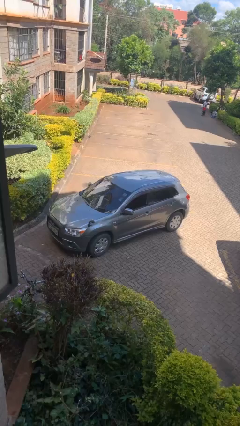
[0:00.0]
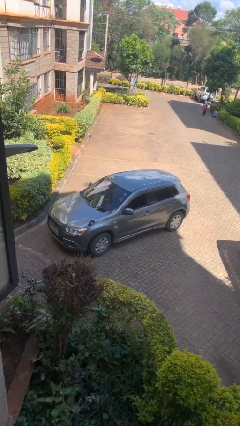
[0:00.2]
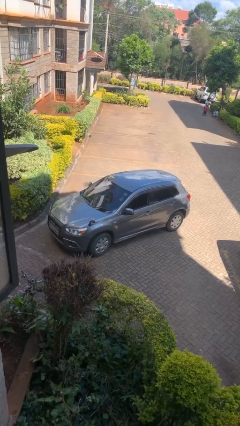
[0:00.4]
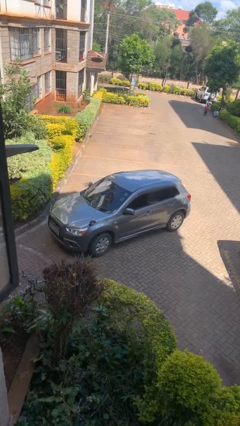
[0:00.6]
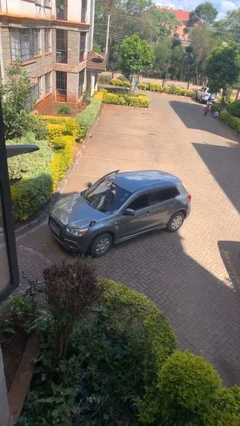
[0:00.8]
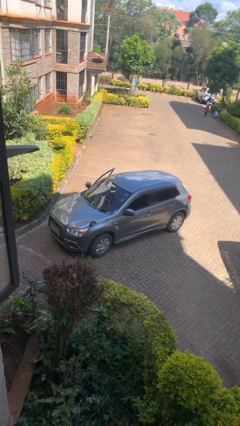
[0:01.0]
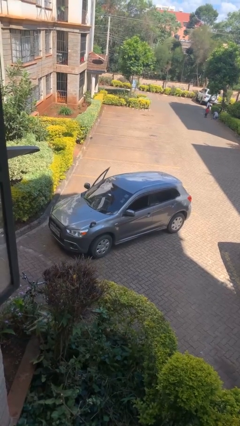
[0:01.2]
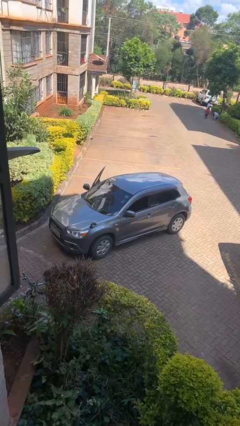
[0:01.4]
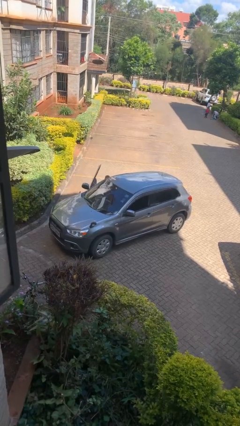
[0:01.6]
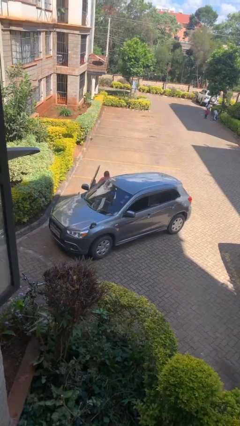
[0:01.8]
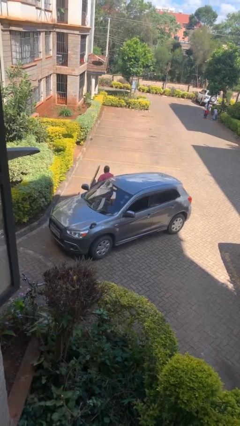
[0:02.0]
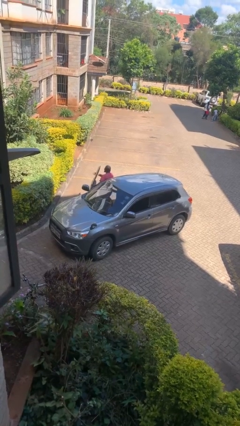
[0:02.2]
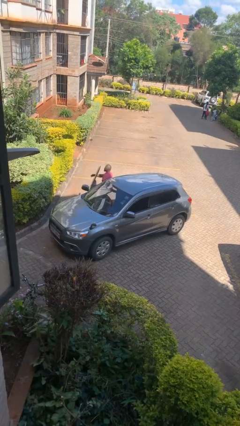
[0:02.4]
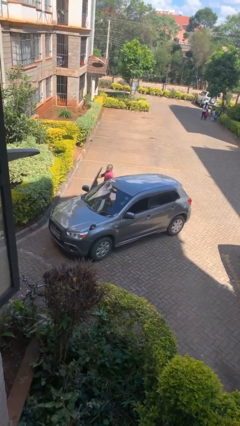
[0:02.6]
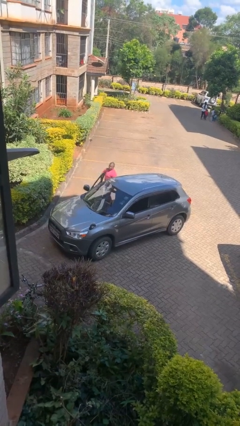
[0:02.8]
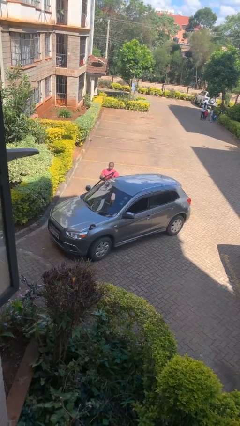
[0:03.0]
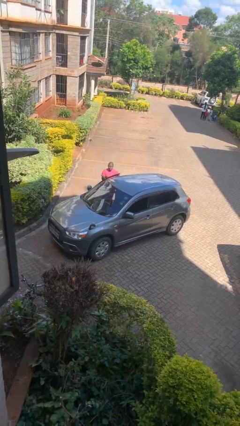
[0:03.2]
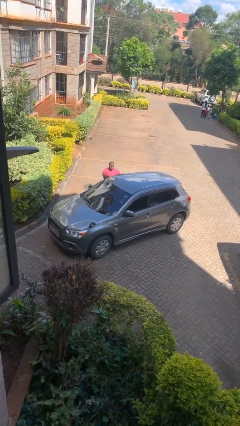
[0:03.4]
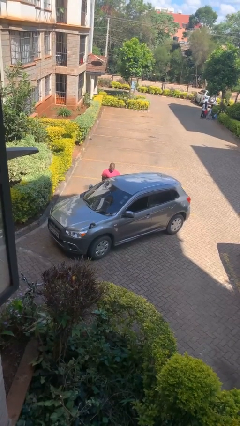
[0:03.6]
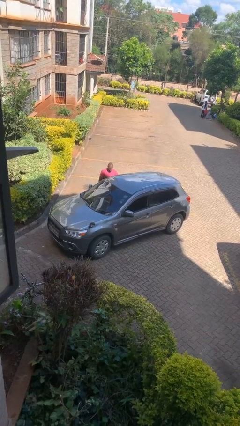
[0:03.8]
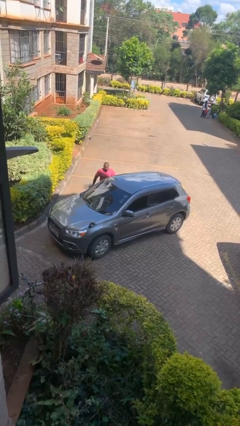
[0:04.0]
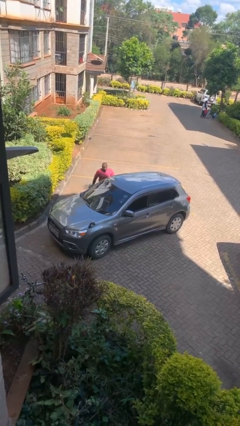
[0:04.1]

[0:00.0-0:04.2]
car drops off person

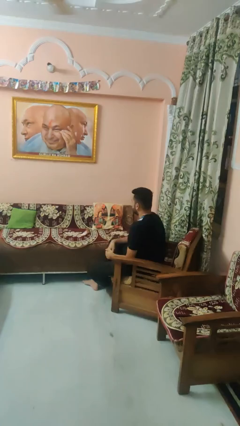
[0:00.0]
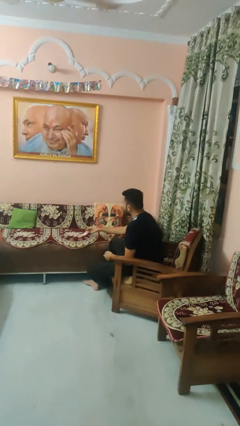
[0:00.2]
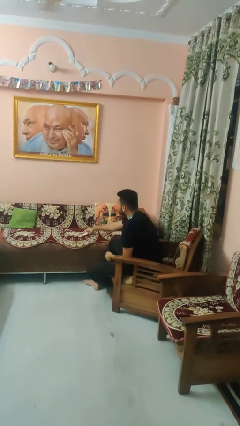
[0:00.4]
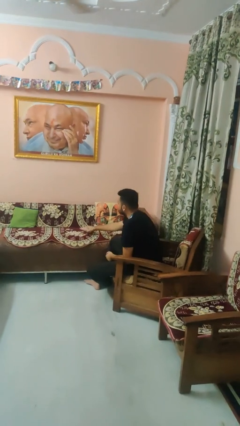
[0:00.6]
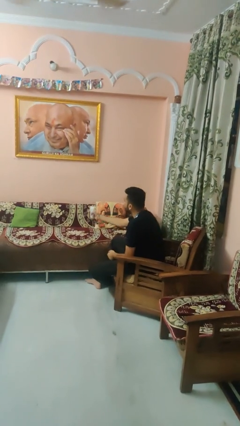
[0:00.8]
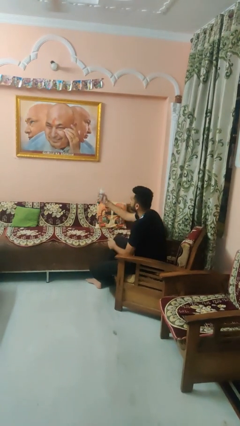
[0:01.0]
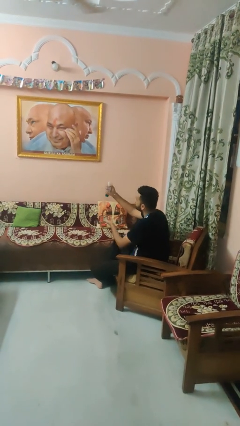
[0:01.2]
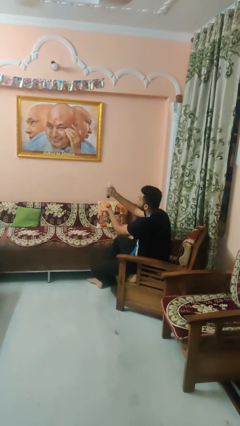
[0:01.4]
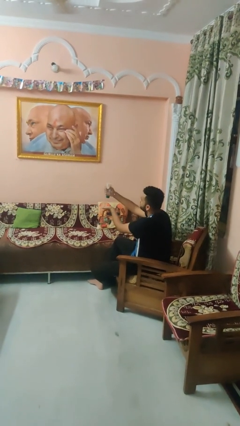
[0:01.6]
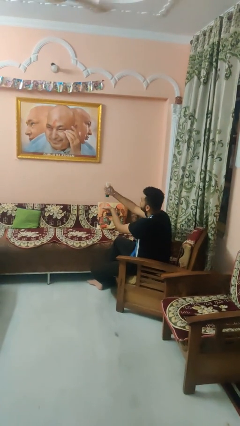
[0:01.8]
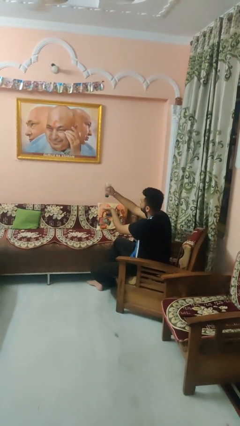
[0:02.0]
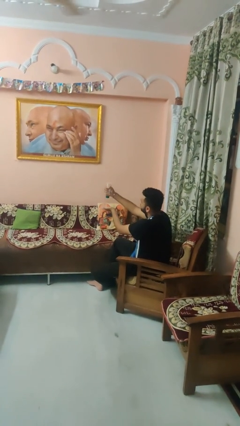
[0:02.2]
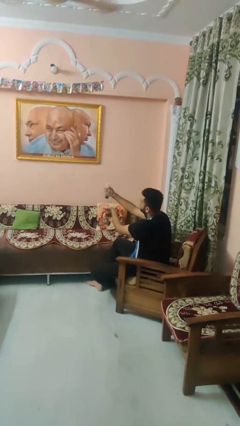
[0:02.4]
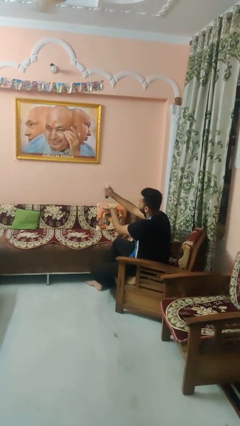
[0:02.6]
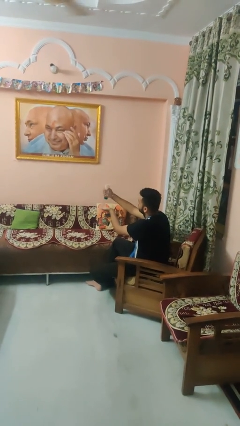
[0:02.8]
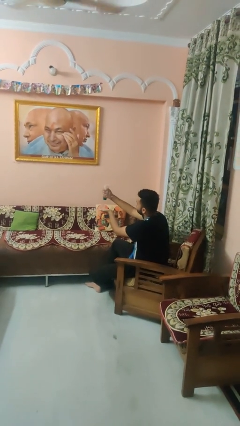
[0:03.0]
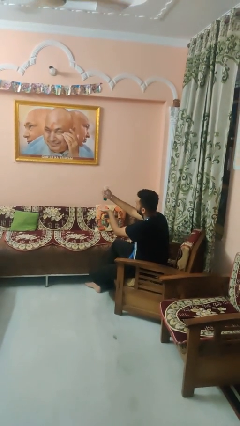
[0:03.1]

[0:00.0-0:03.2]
person squeezes object

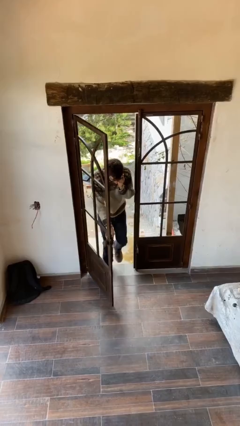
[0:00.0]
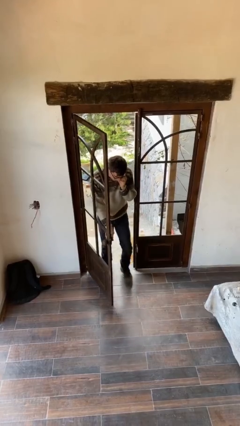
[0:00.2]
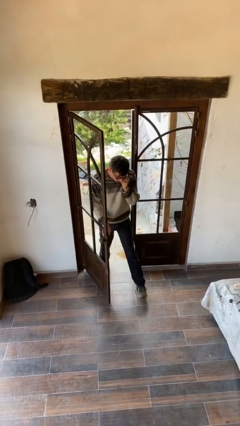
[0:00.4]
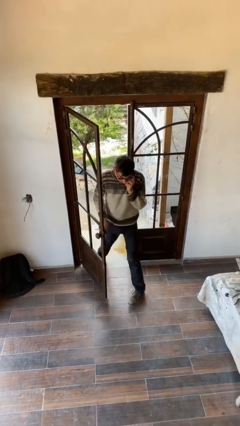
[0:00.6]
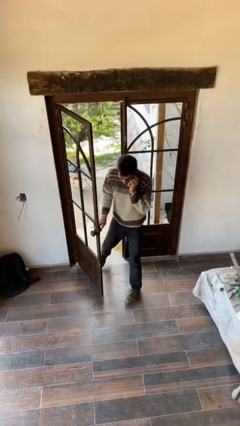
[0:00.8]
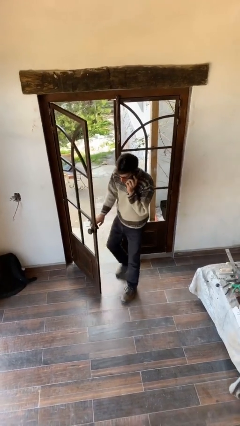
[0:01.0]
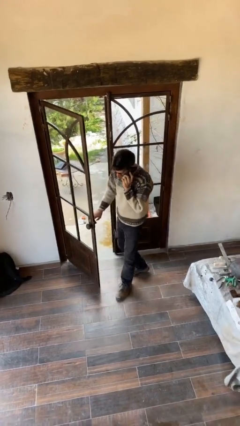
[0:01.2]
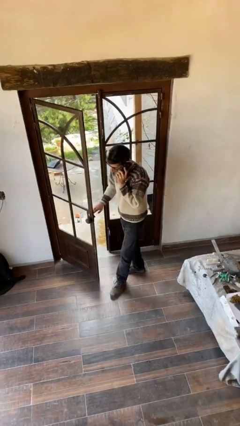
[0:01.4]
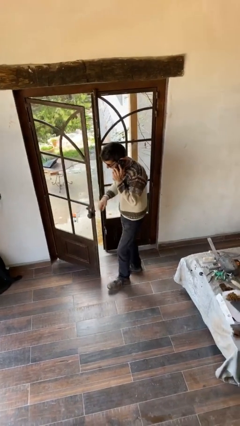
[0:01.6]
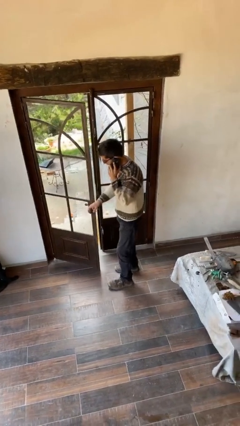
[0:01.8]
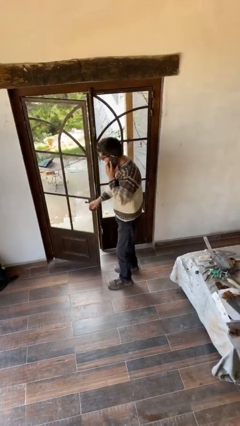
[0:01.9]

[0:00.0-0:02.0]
person enters scene through structure

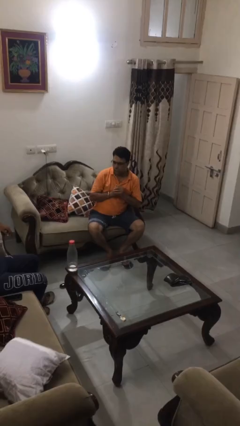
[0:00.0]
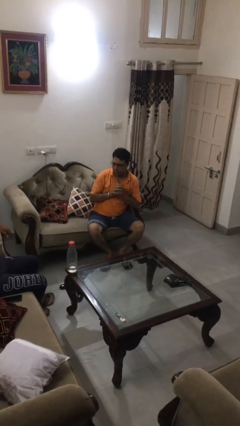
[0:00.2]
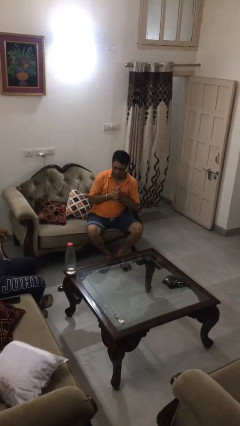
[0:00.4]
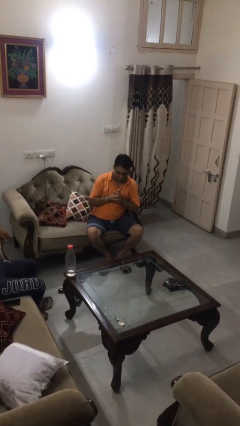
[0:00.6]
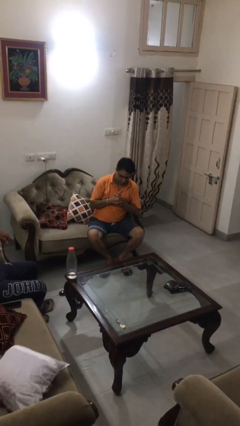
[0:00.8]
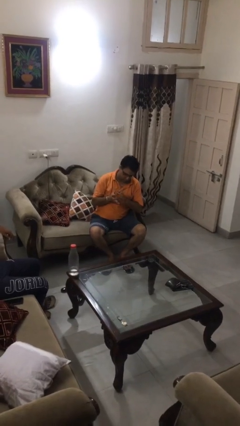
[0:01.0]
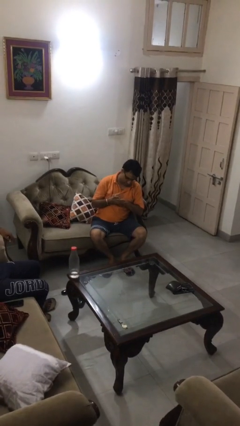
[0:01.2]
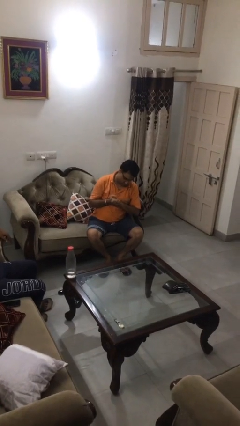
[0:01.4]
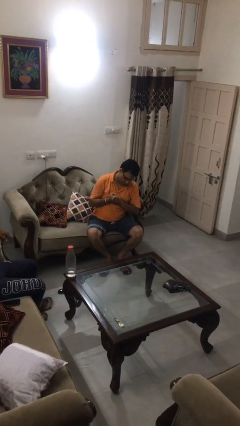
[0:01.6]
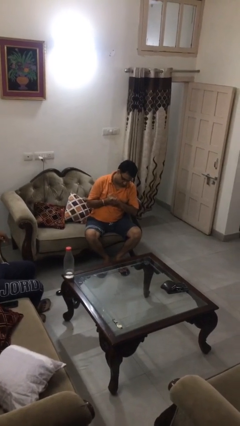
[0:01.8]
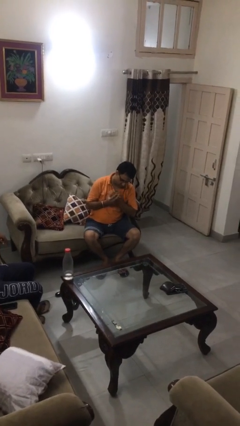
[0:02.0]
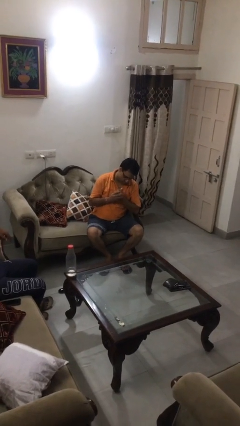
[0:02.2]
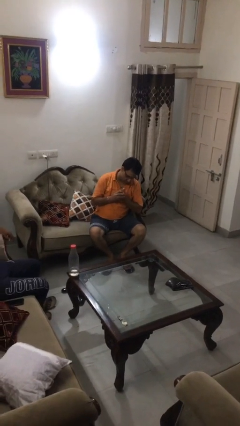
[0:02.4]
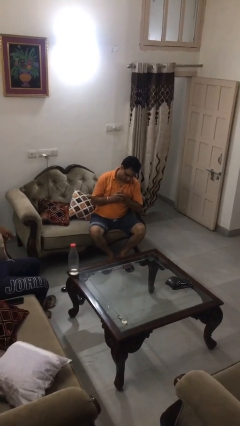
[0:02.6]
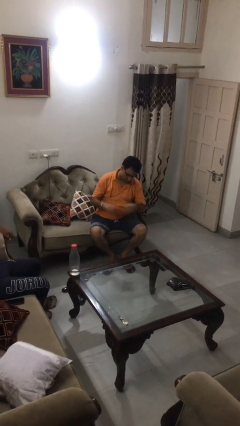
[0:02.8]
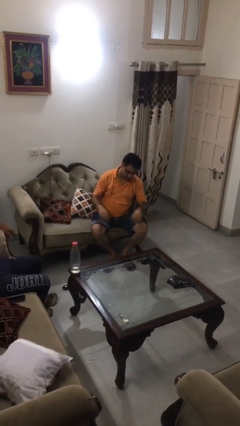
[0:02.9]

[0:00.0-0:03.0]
person cracks knuckles

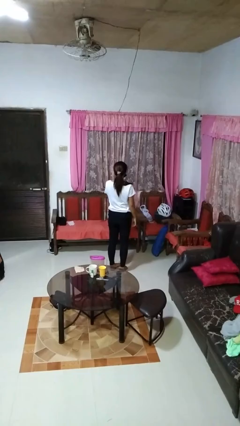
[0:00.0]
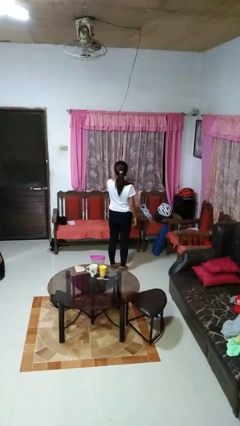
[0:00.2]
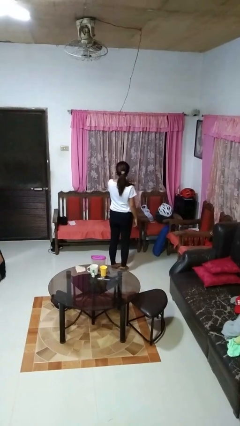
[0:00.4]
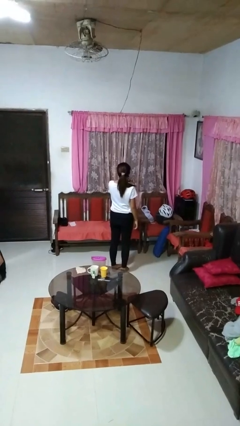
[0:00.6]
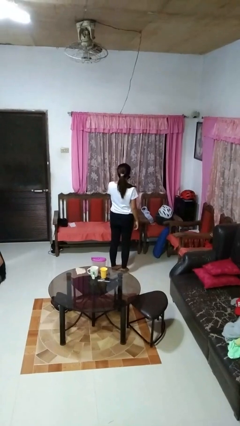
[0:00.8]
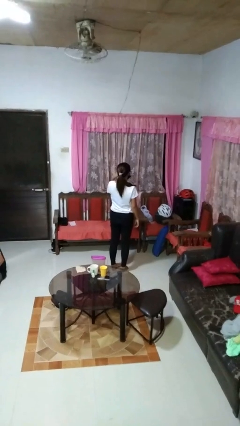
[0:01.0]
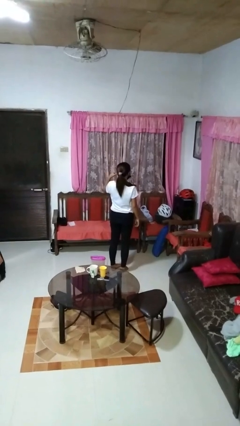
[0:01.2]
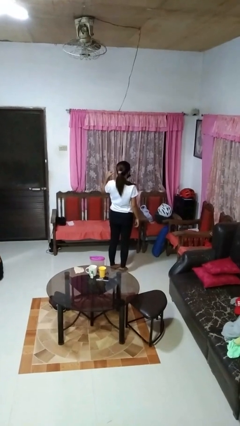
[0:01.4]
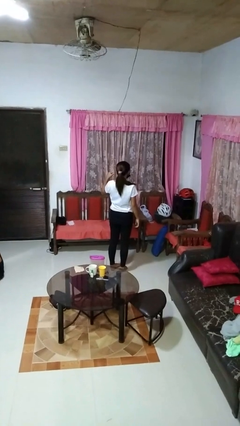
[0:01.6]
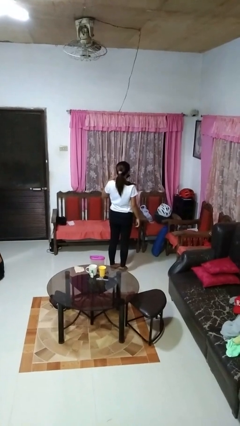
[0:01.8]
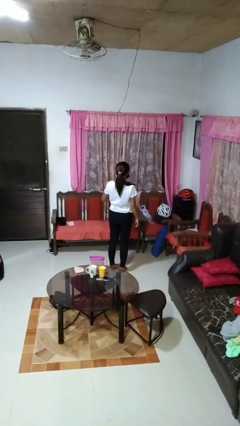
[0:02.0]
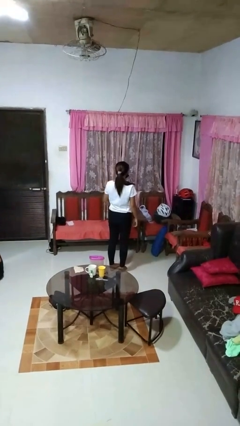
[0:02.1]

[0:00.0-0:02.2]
person gestures cut

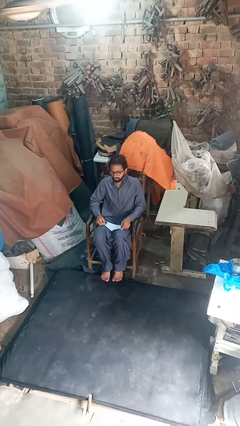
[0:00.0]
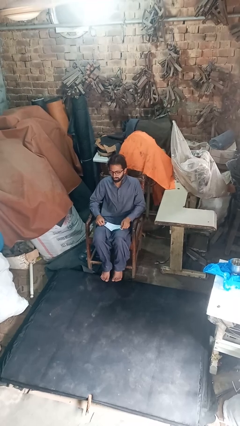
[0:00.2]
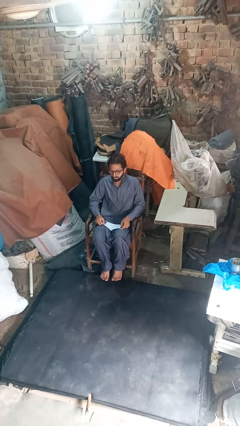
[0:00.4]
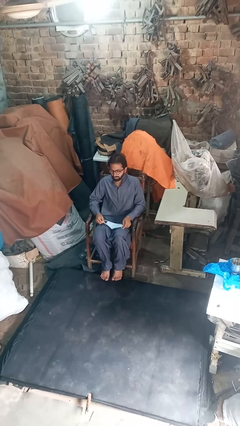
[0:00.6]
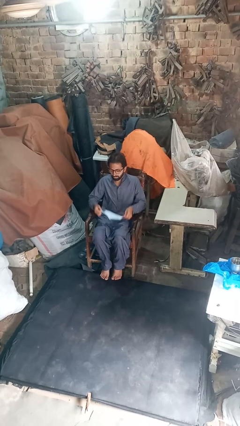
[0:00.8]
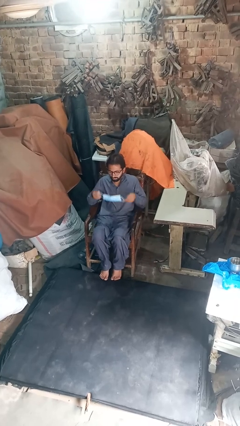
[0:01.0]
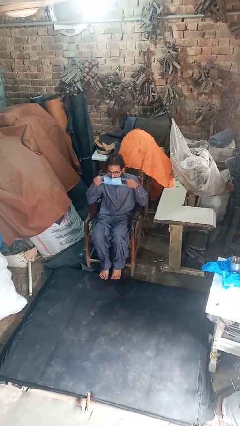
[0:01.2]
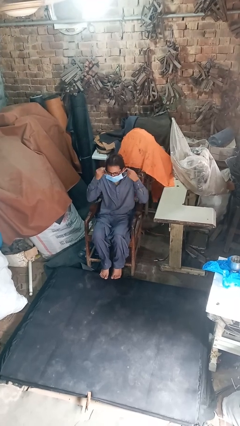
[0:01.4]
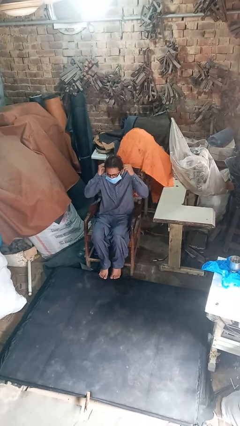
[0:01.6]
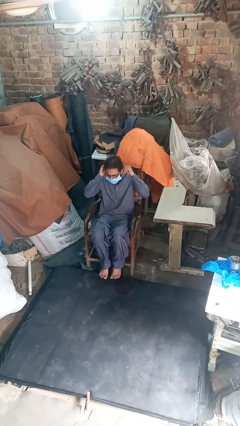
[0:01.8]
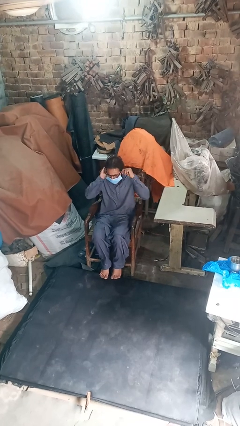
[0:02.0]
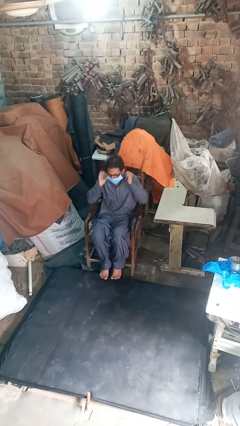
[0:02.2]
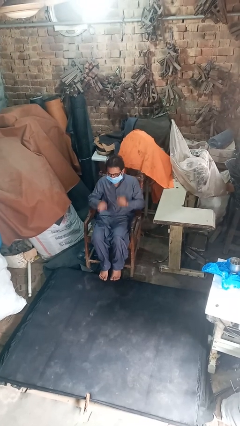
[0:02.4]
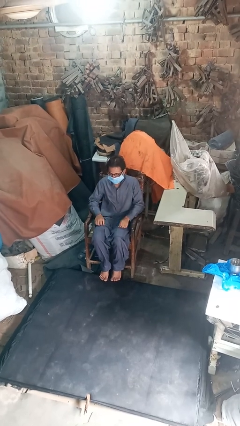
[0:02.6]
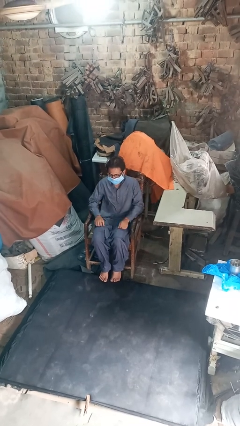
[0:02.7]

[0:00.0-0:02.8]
person puts on facemask
